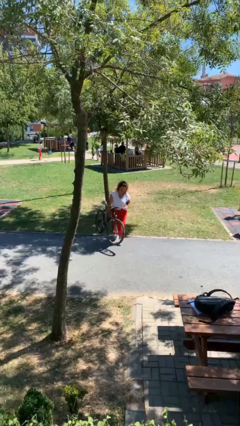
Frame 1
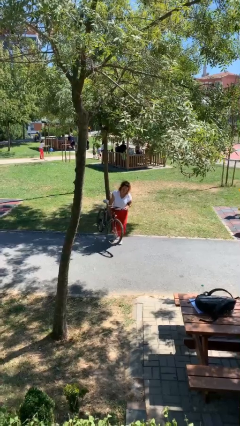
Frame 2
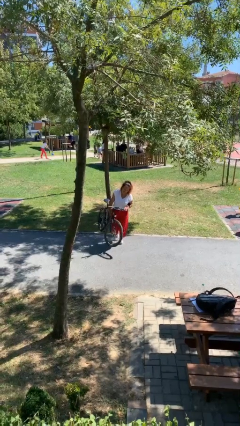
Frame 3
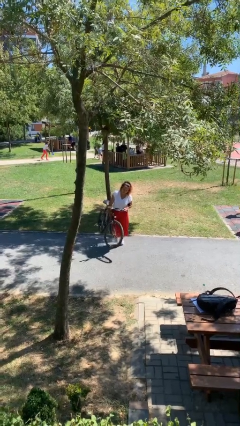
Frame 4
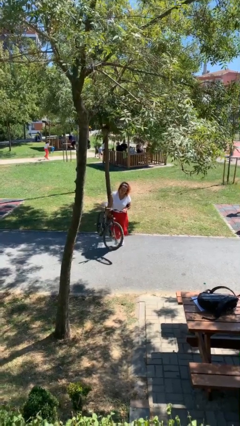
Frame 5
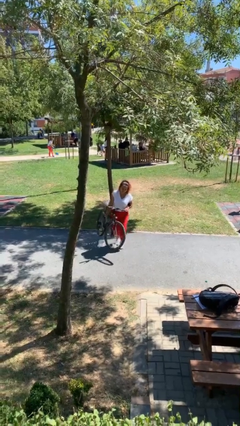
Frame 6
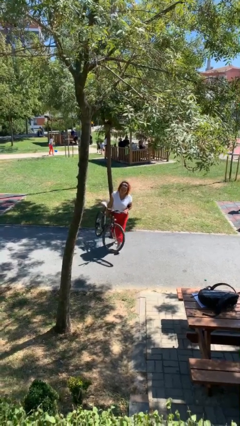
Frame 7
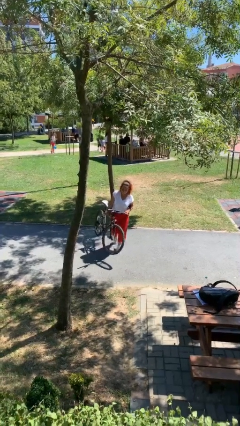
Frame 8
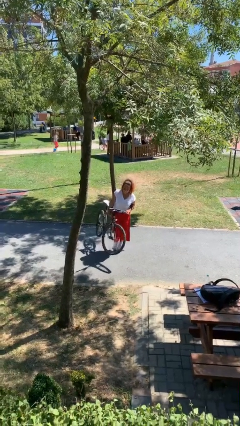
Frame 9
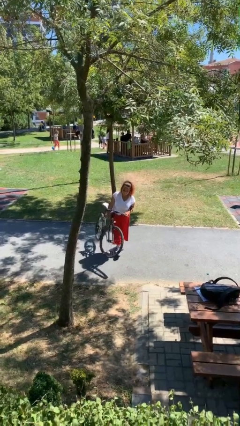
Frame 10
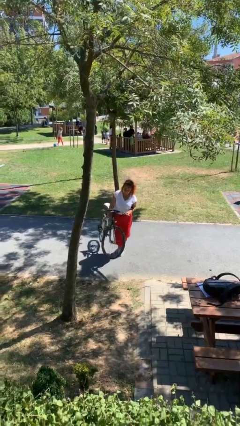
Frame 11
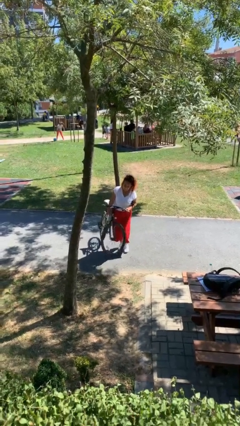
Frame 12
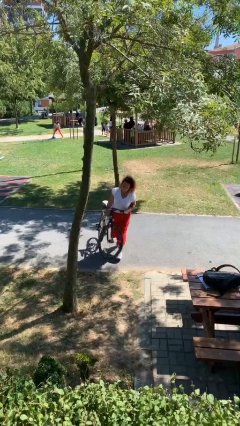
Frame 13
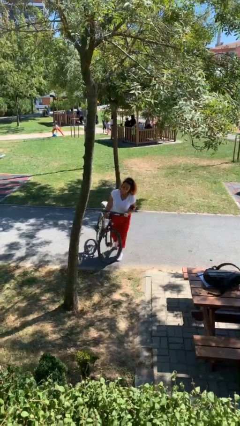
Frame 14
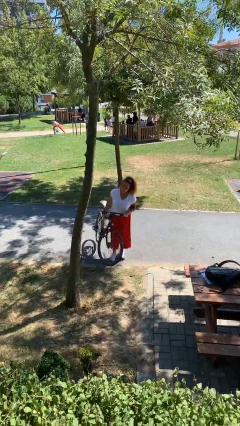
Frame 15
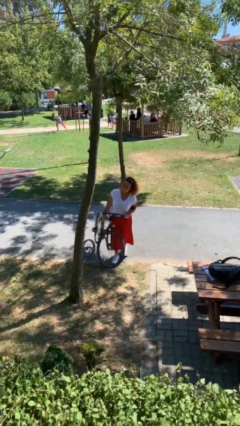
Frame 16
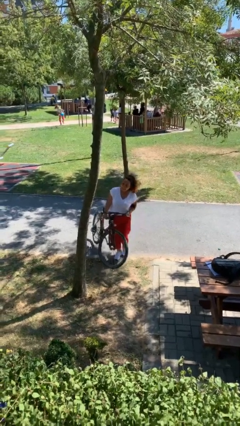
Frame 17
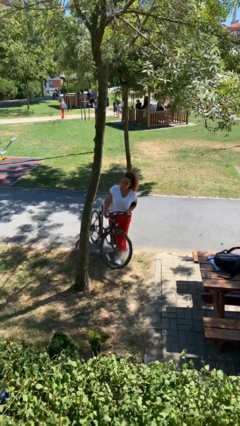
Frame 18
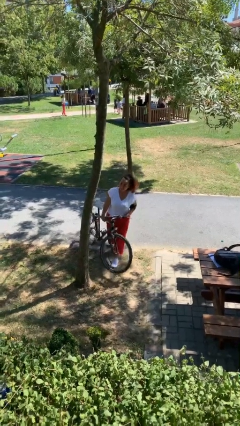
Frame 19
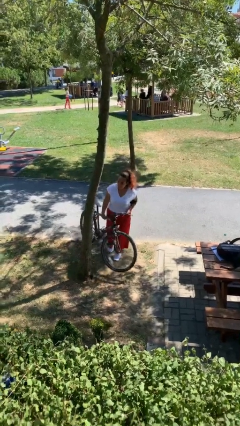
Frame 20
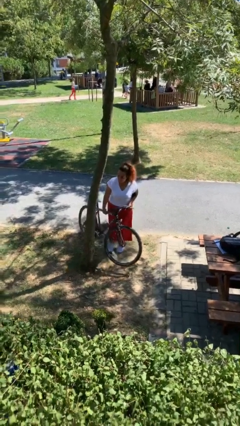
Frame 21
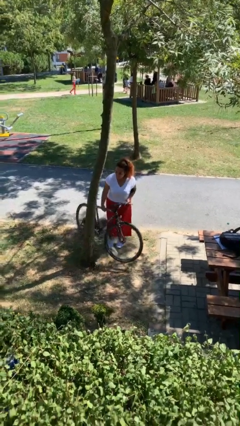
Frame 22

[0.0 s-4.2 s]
person carries heavy object

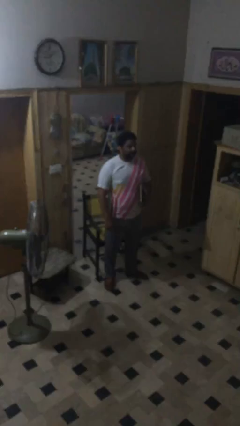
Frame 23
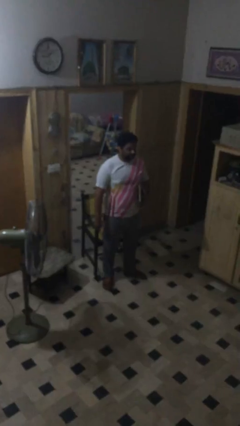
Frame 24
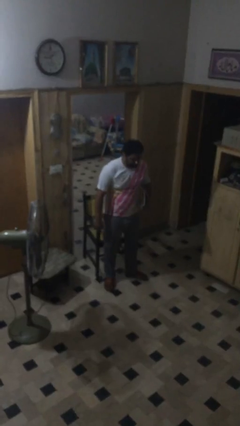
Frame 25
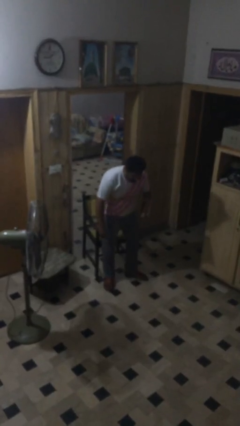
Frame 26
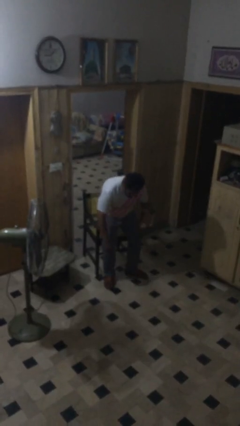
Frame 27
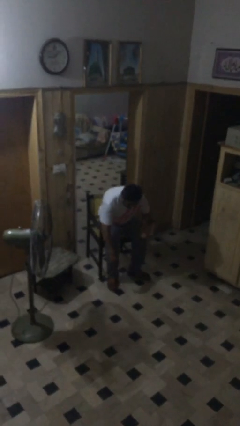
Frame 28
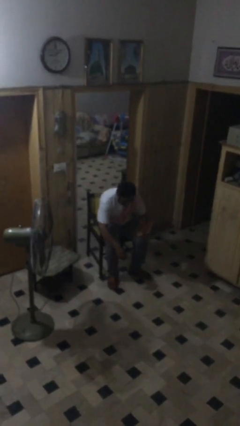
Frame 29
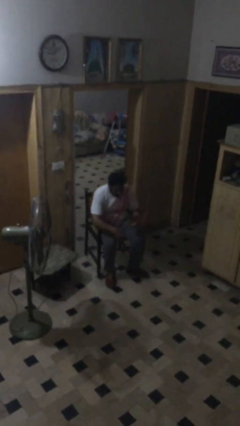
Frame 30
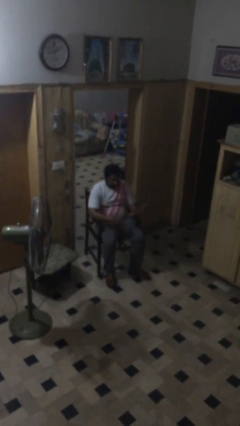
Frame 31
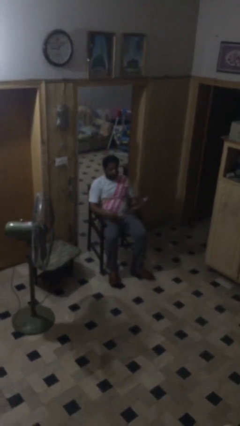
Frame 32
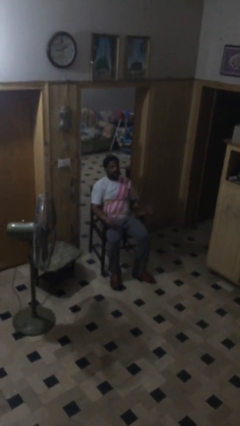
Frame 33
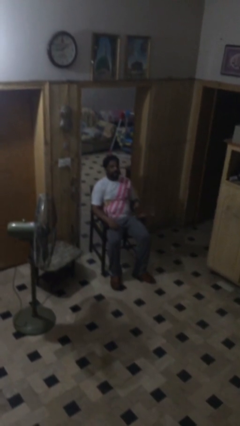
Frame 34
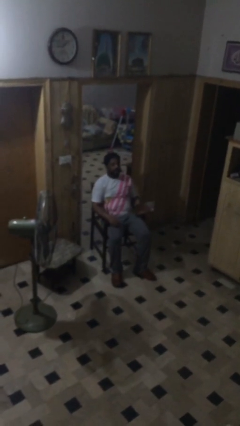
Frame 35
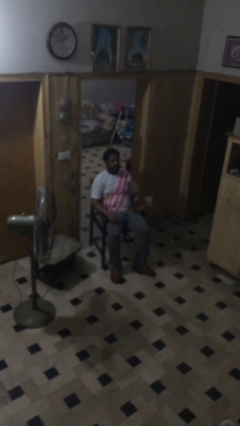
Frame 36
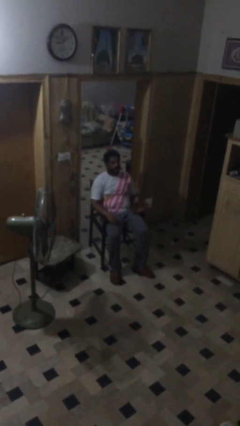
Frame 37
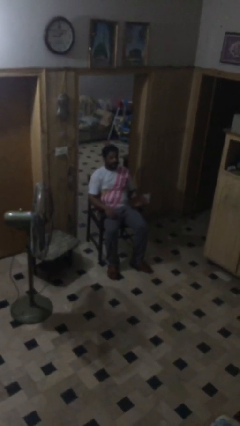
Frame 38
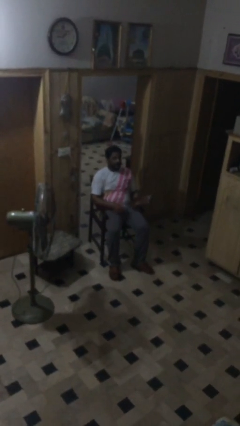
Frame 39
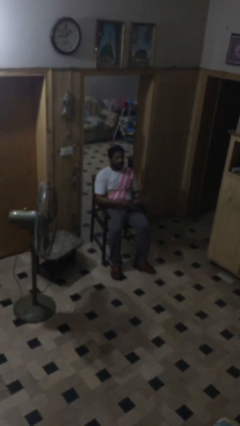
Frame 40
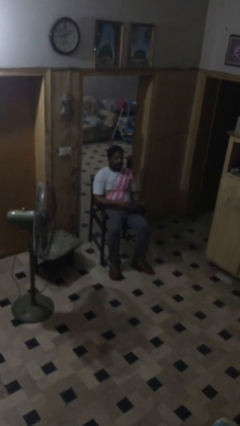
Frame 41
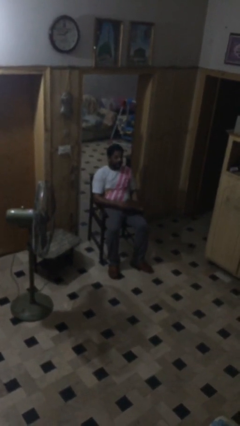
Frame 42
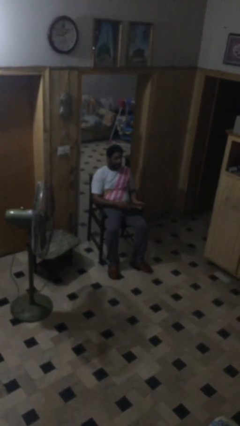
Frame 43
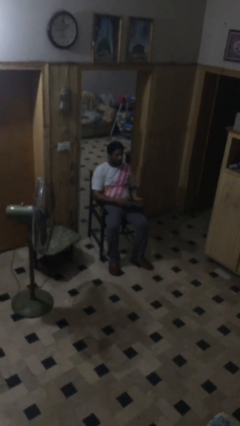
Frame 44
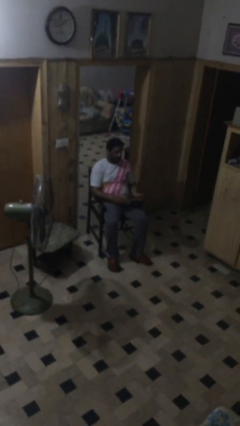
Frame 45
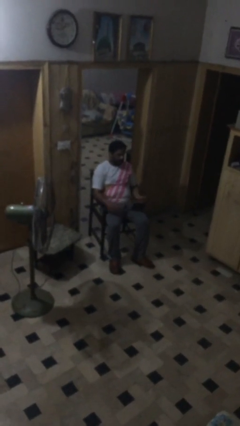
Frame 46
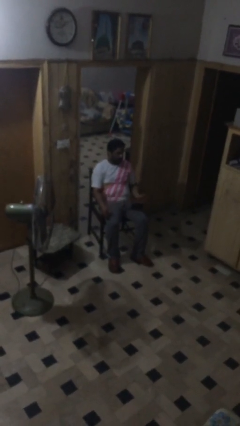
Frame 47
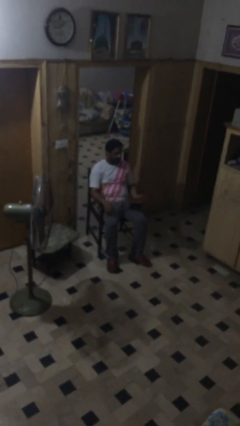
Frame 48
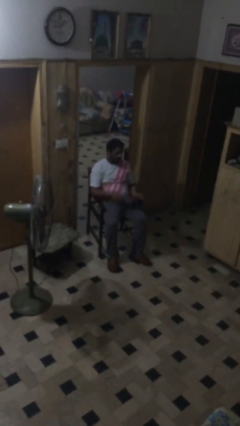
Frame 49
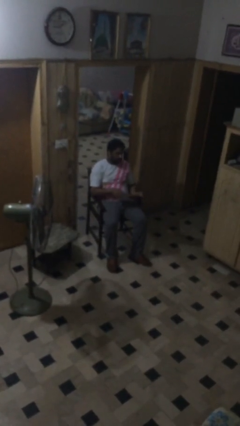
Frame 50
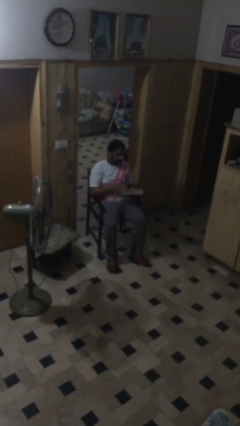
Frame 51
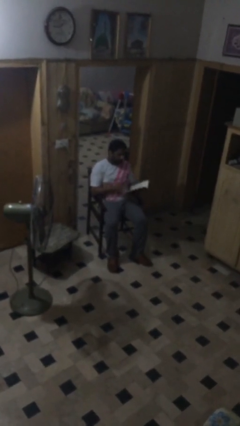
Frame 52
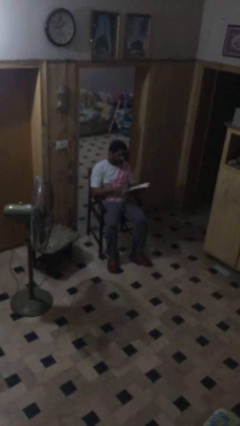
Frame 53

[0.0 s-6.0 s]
person sits down

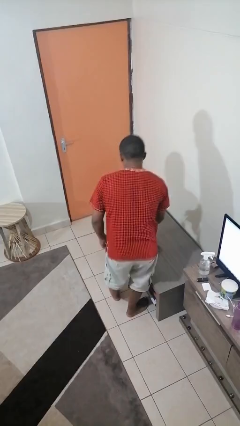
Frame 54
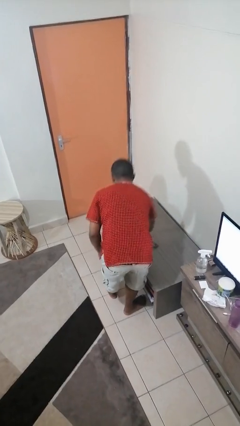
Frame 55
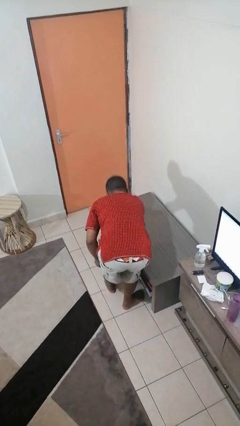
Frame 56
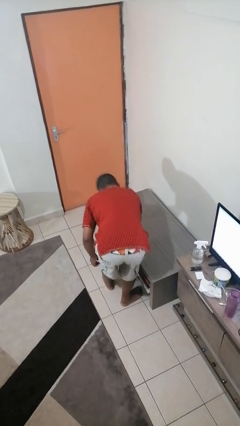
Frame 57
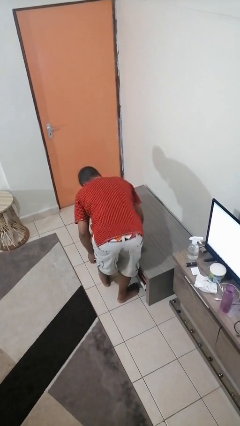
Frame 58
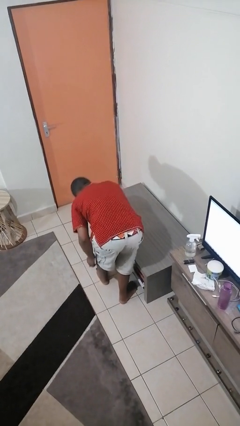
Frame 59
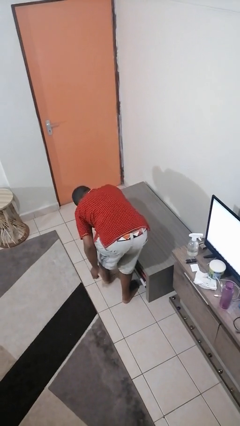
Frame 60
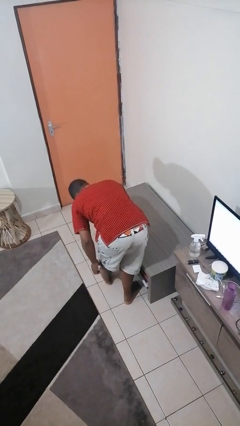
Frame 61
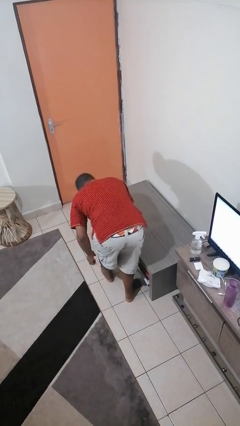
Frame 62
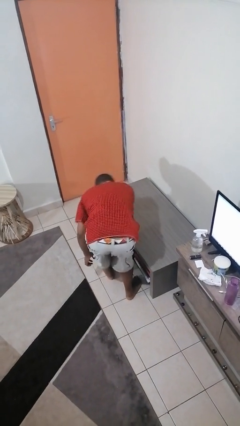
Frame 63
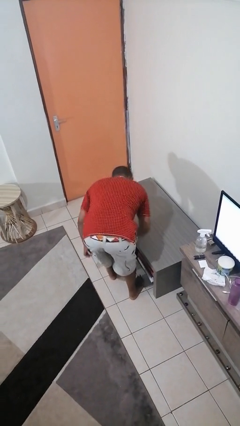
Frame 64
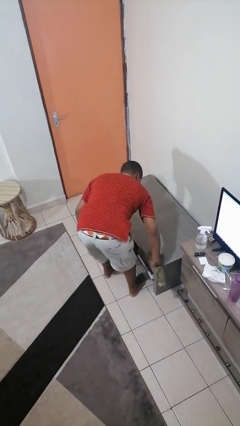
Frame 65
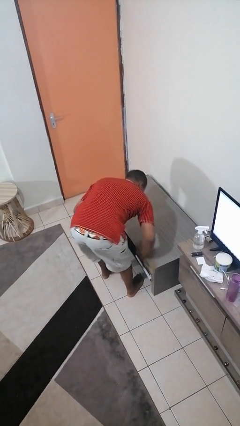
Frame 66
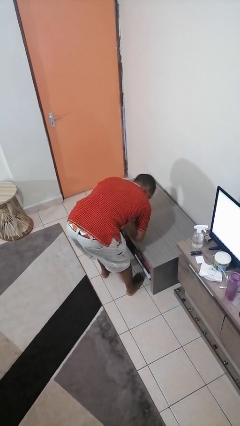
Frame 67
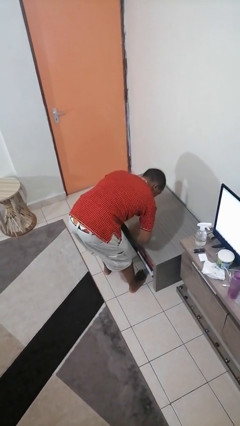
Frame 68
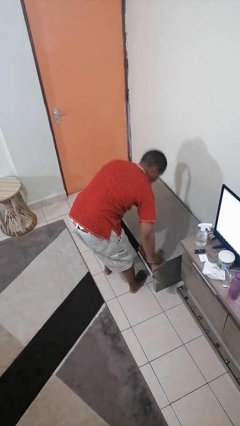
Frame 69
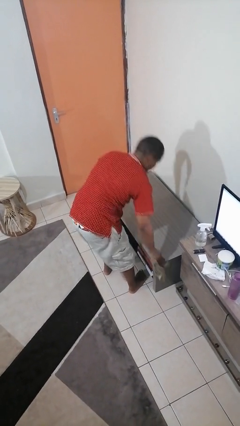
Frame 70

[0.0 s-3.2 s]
person cleans table with rag

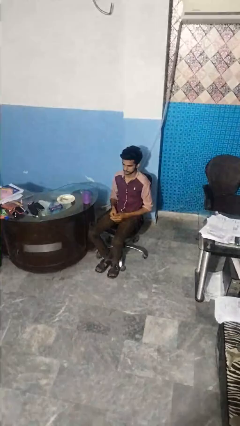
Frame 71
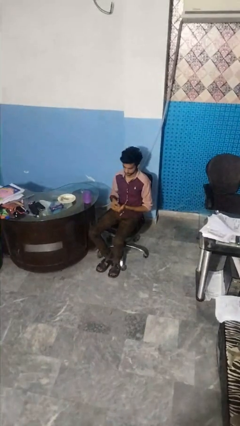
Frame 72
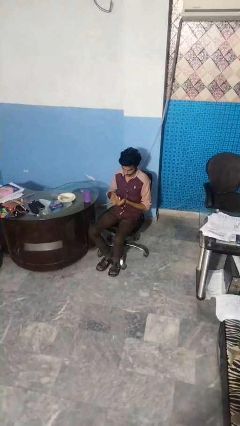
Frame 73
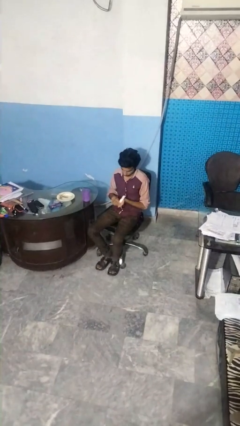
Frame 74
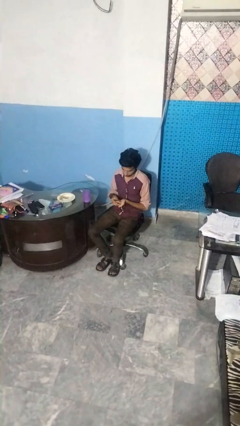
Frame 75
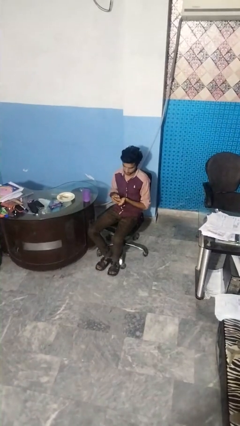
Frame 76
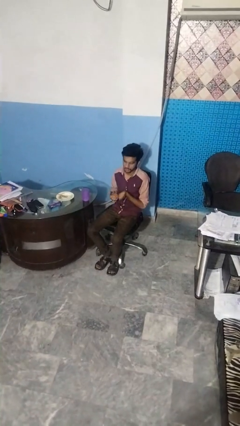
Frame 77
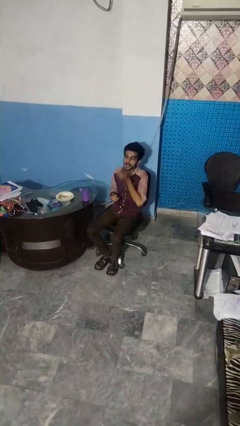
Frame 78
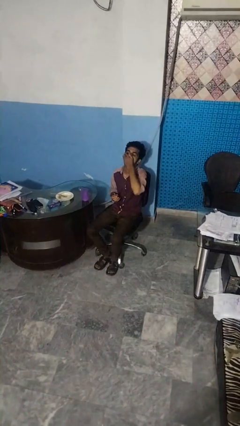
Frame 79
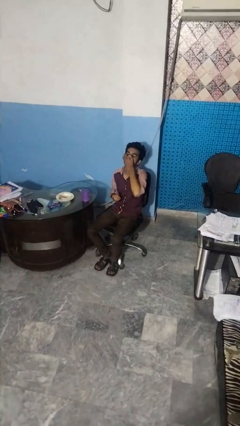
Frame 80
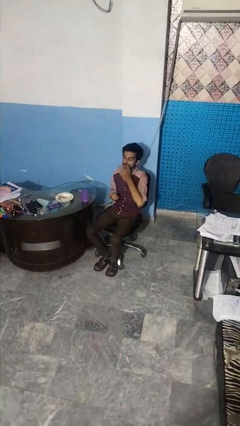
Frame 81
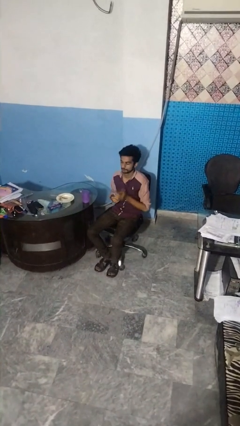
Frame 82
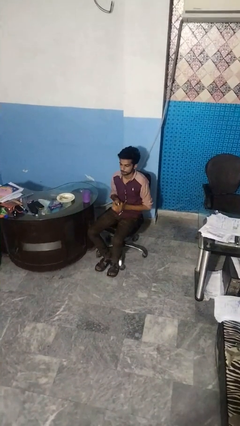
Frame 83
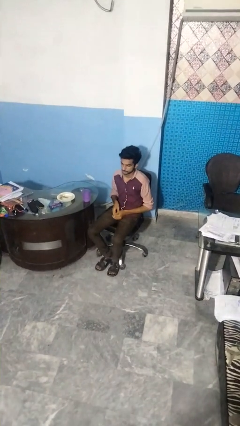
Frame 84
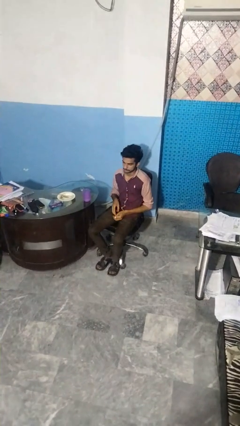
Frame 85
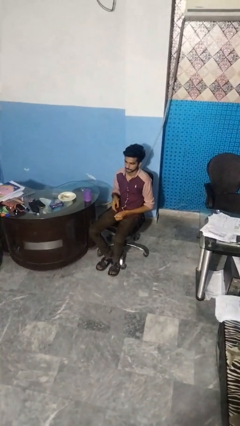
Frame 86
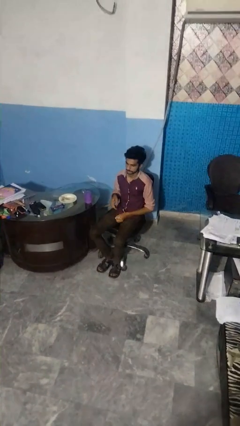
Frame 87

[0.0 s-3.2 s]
person takes medicine pills

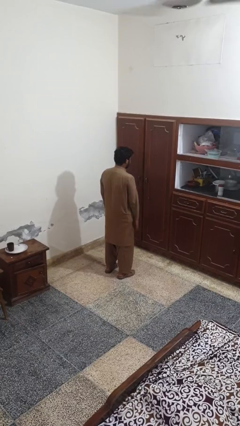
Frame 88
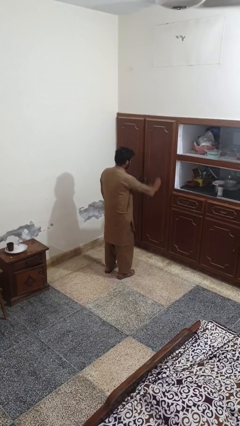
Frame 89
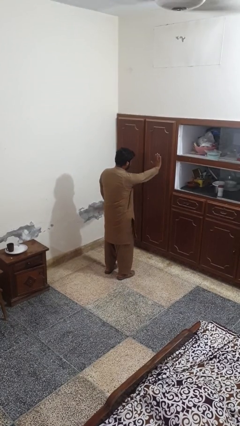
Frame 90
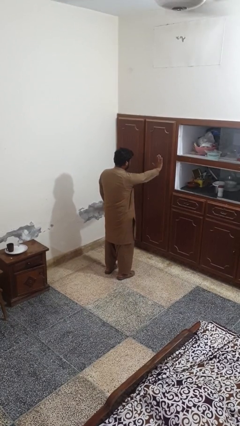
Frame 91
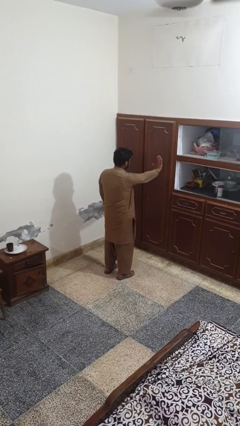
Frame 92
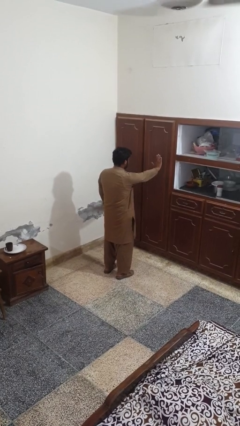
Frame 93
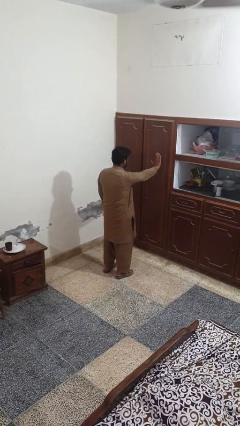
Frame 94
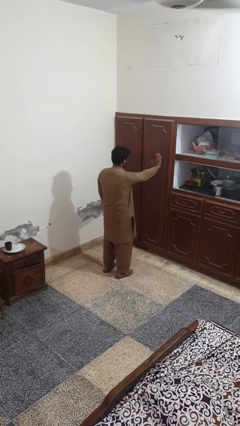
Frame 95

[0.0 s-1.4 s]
person gestures stop
